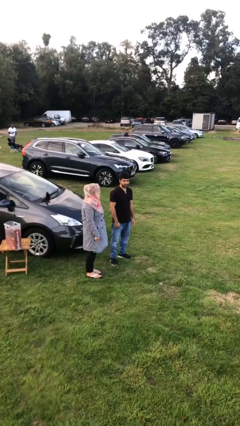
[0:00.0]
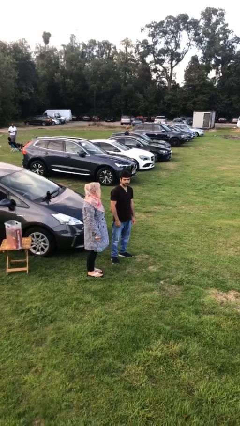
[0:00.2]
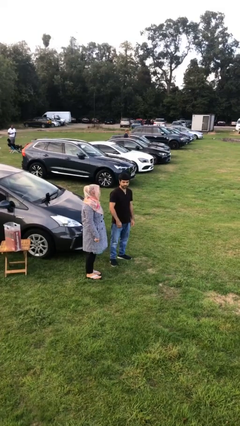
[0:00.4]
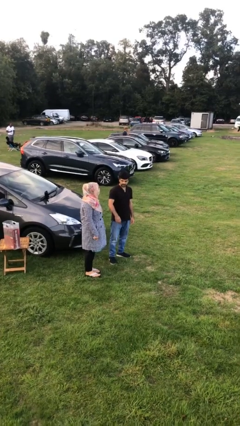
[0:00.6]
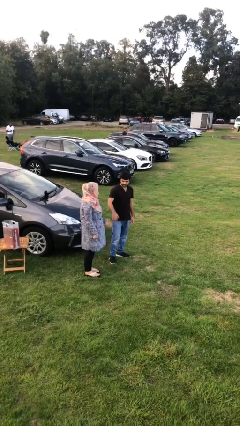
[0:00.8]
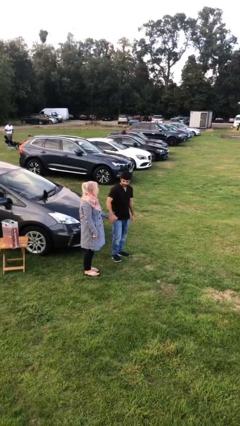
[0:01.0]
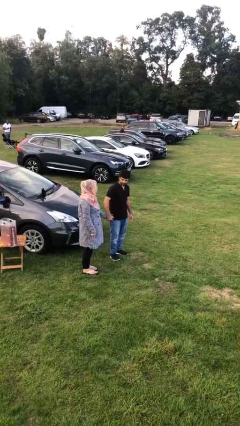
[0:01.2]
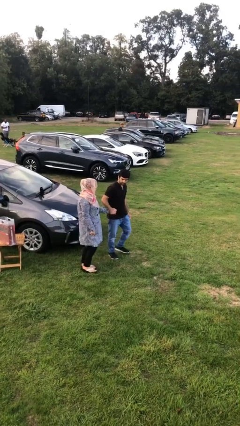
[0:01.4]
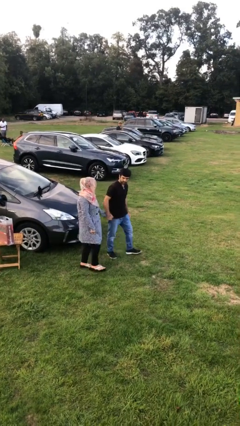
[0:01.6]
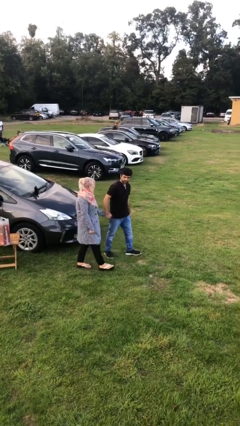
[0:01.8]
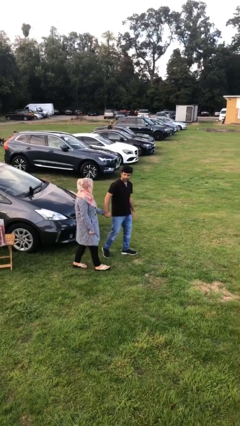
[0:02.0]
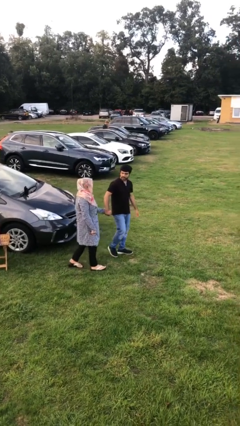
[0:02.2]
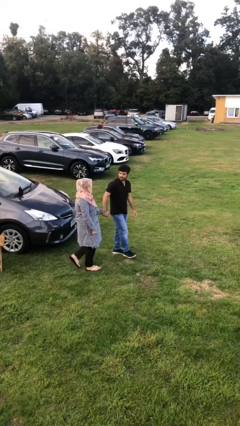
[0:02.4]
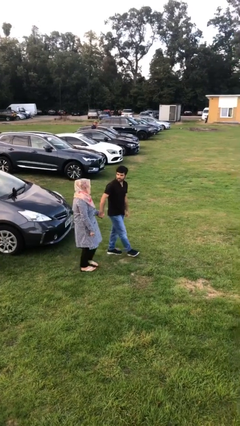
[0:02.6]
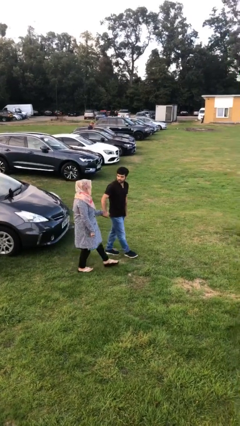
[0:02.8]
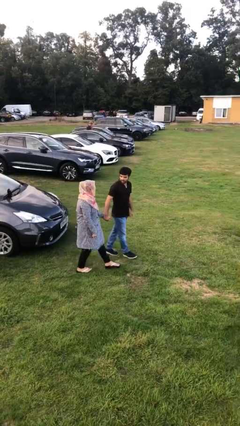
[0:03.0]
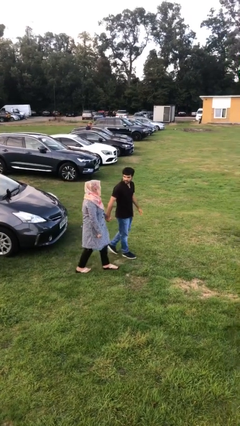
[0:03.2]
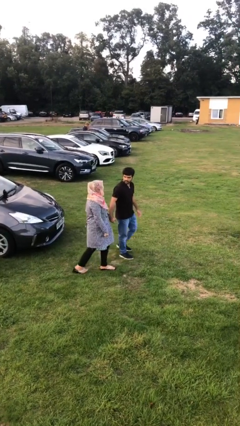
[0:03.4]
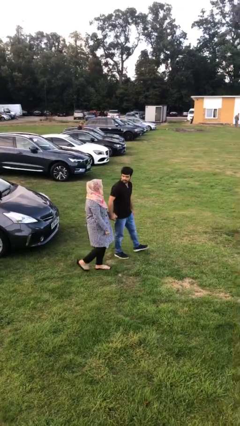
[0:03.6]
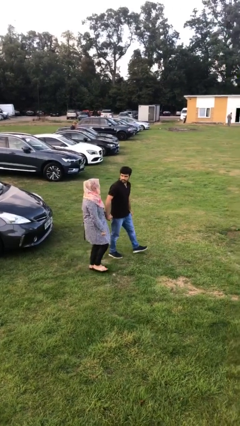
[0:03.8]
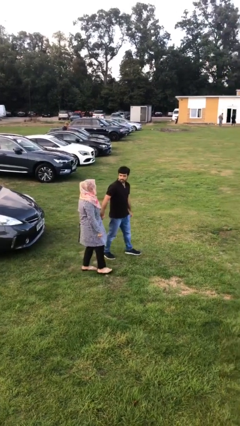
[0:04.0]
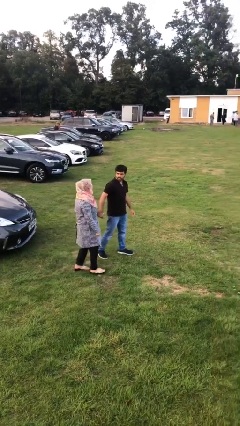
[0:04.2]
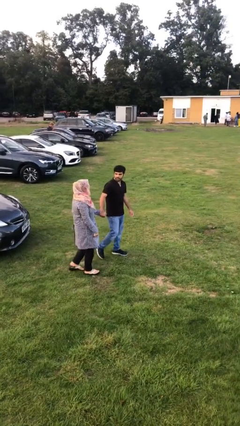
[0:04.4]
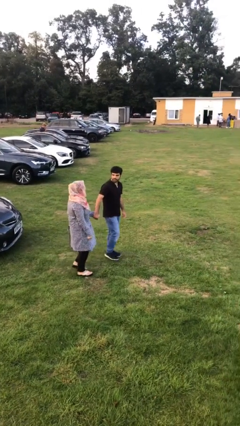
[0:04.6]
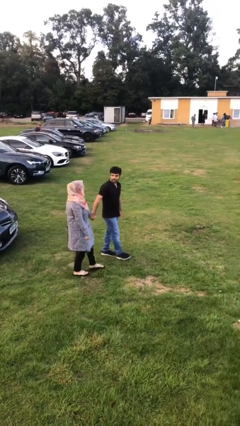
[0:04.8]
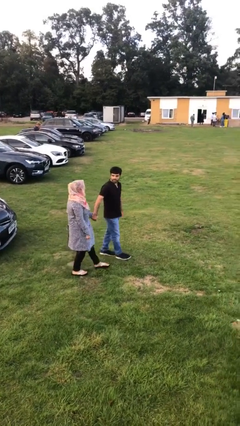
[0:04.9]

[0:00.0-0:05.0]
person holds hand

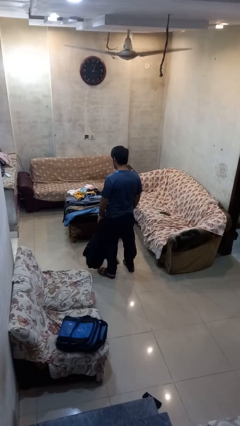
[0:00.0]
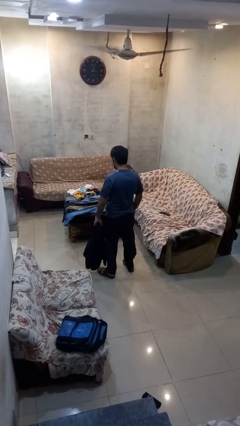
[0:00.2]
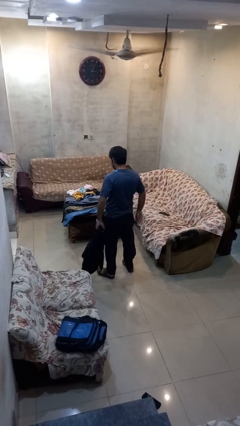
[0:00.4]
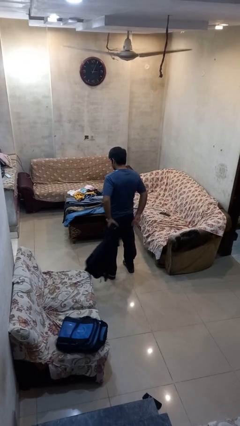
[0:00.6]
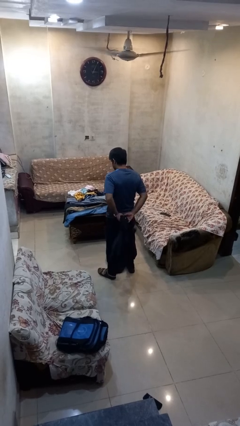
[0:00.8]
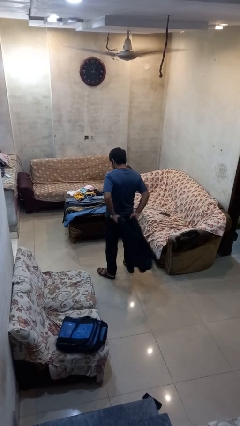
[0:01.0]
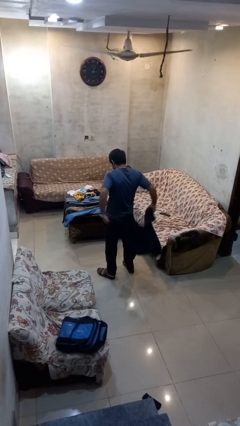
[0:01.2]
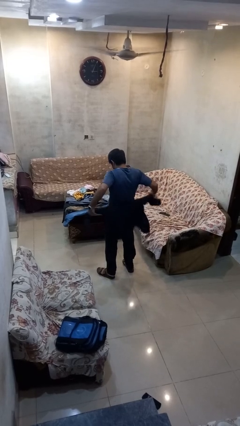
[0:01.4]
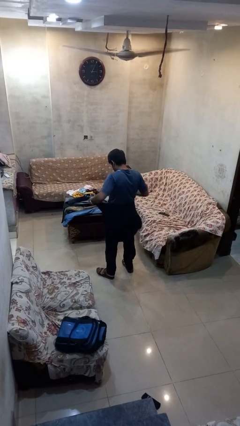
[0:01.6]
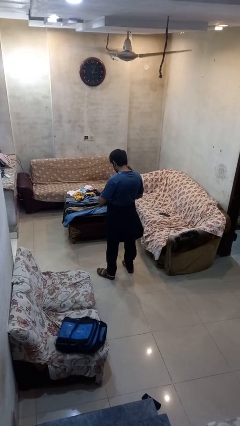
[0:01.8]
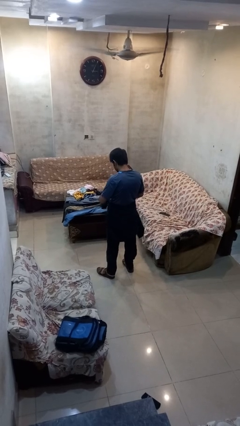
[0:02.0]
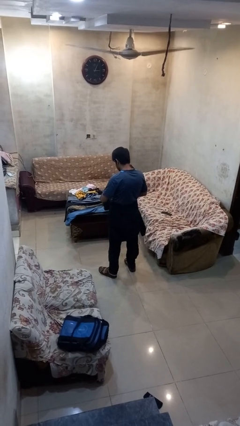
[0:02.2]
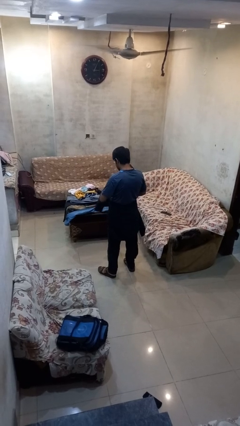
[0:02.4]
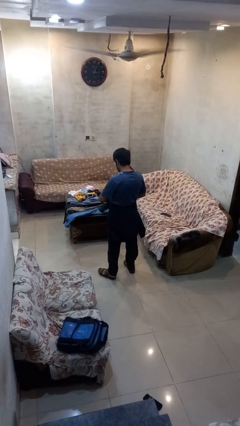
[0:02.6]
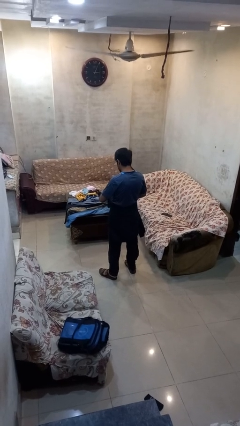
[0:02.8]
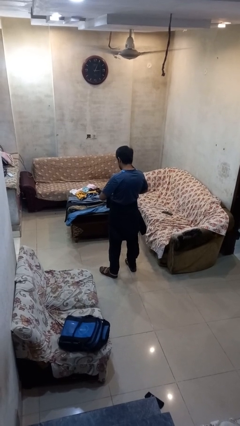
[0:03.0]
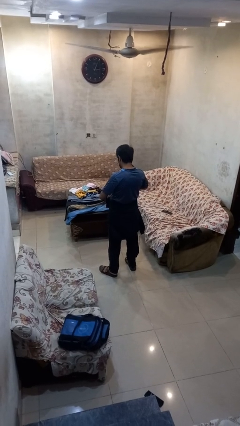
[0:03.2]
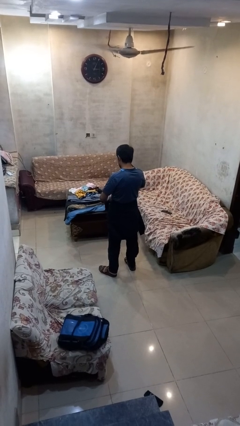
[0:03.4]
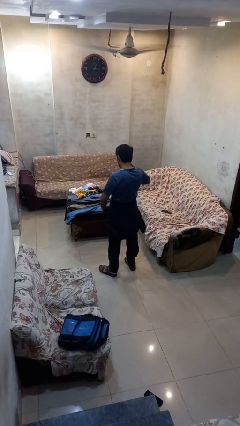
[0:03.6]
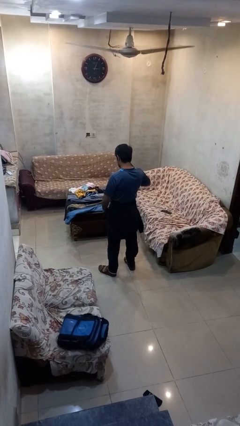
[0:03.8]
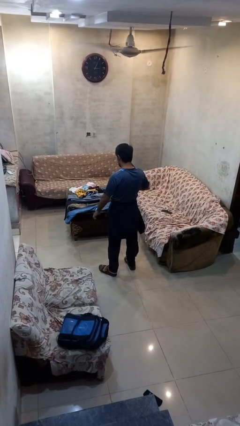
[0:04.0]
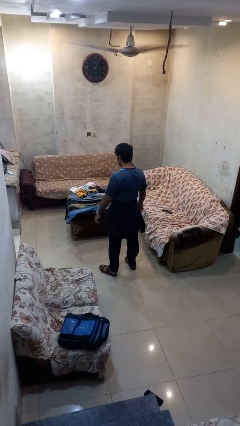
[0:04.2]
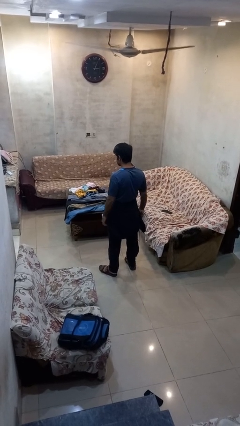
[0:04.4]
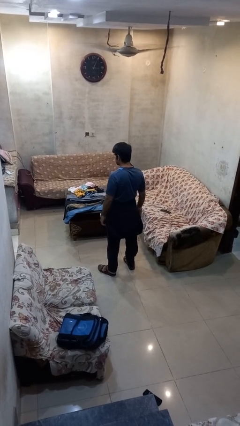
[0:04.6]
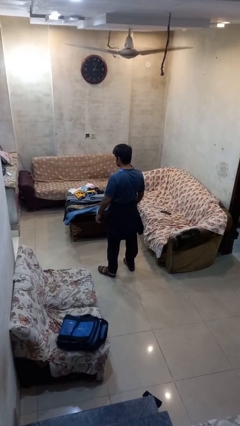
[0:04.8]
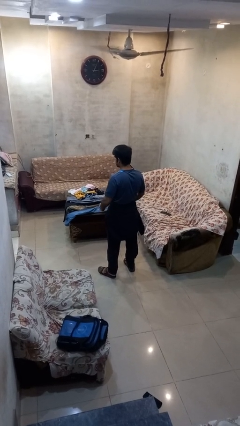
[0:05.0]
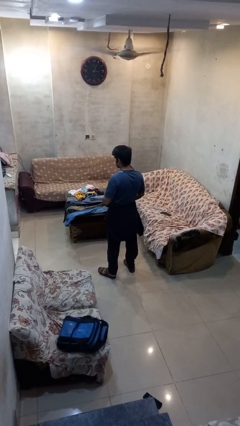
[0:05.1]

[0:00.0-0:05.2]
person ties jacket around waist

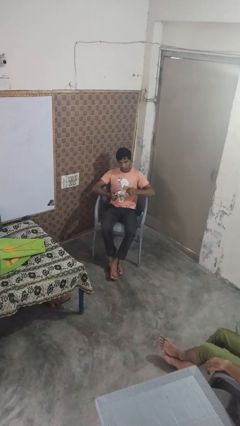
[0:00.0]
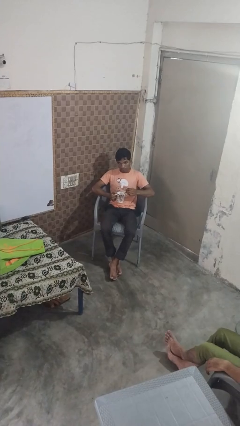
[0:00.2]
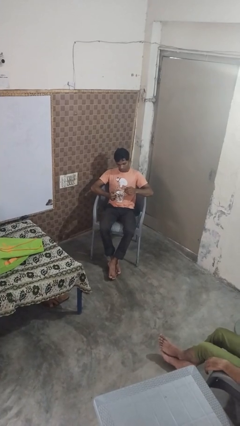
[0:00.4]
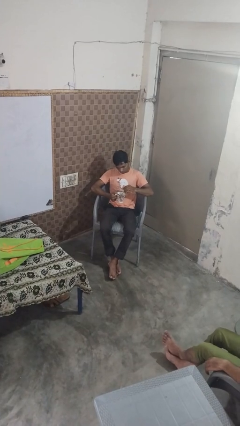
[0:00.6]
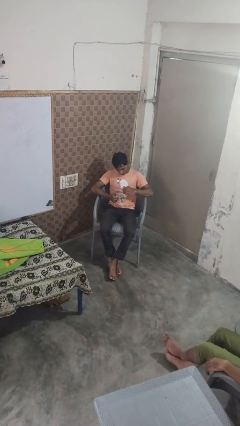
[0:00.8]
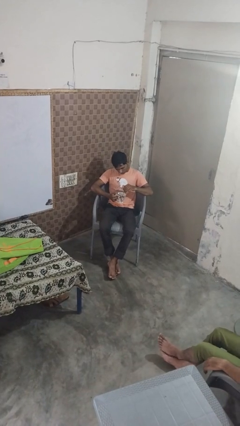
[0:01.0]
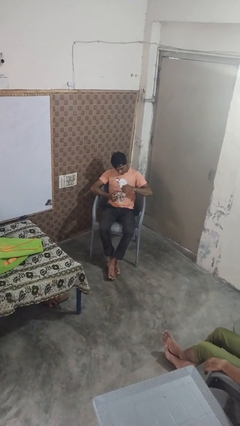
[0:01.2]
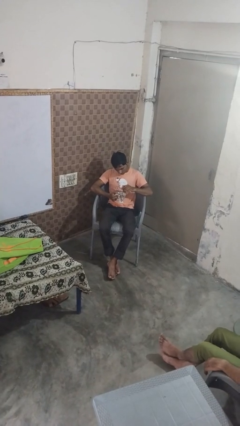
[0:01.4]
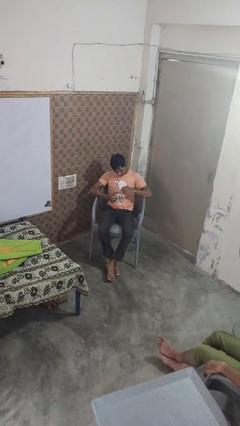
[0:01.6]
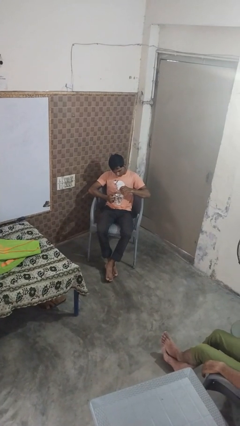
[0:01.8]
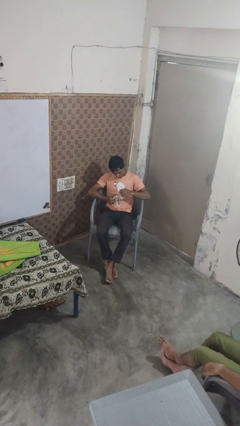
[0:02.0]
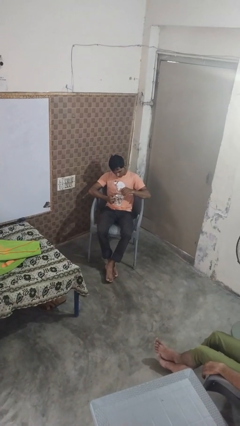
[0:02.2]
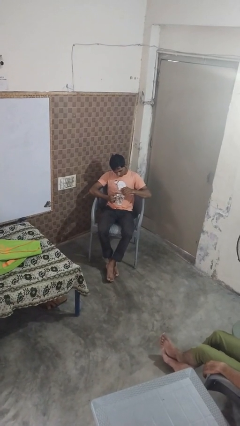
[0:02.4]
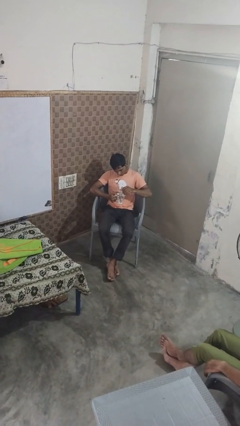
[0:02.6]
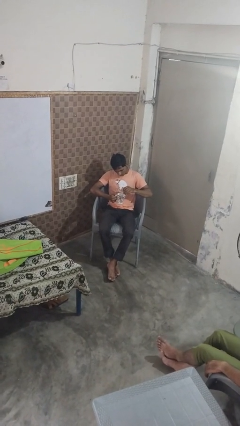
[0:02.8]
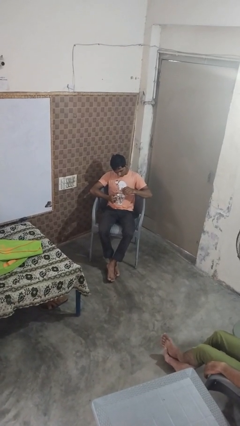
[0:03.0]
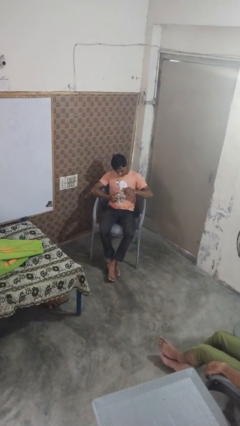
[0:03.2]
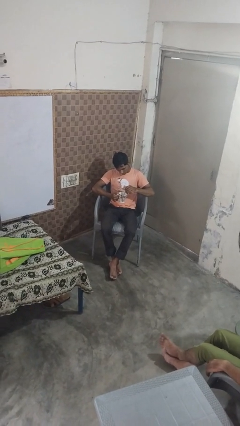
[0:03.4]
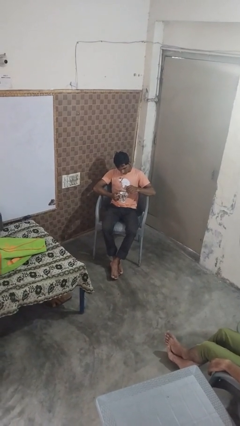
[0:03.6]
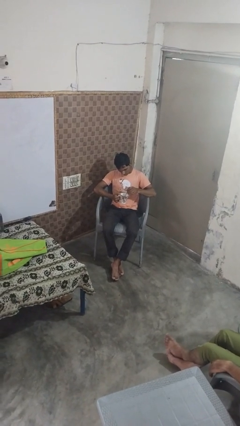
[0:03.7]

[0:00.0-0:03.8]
person stirs mug

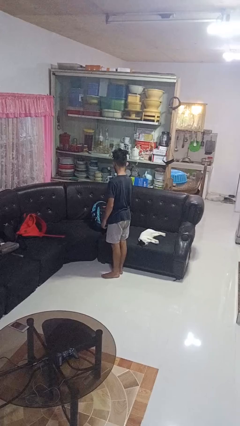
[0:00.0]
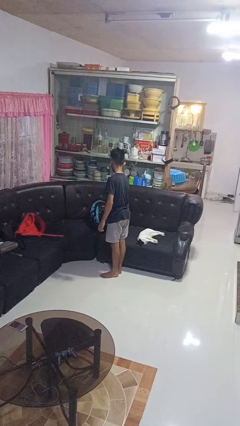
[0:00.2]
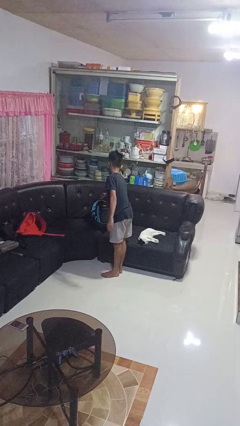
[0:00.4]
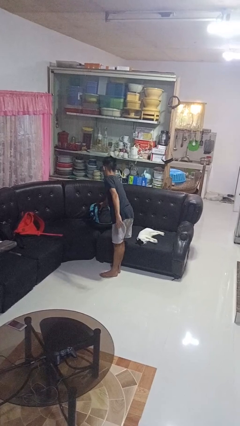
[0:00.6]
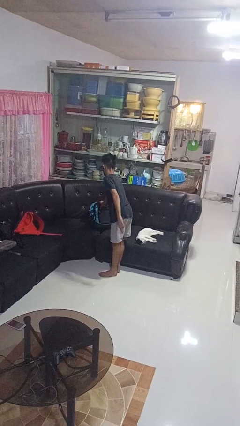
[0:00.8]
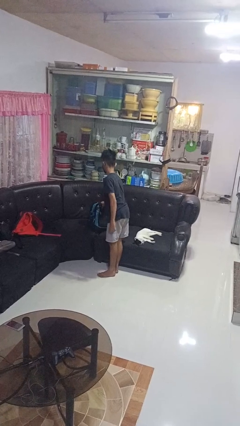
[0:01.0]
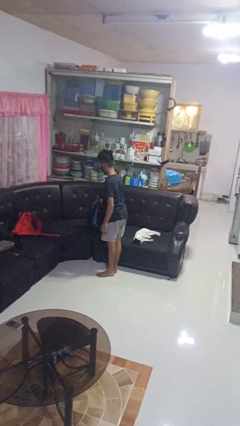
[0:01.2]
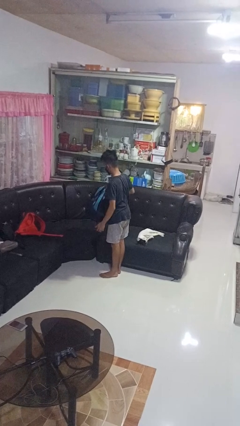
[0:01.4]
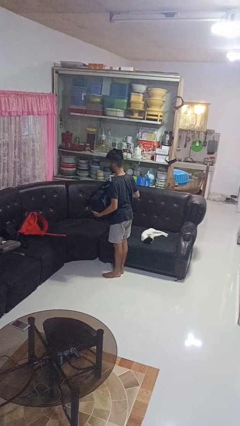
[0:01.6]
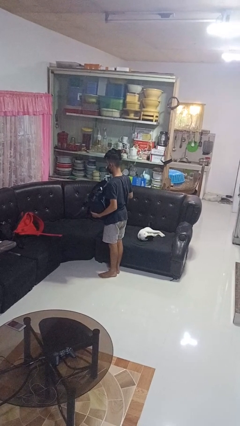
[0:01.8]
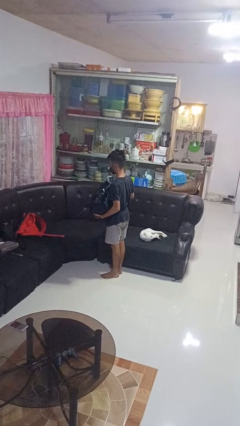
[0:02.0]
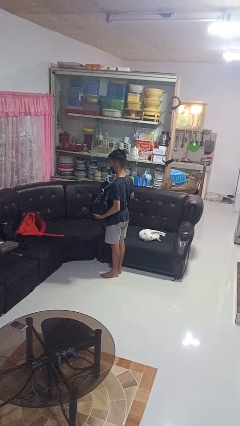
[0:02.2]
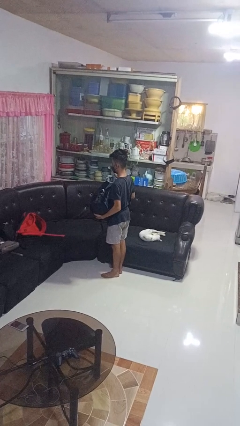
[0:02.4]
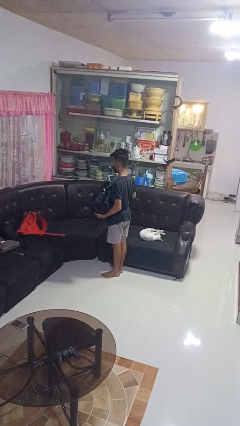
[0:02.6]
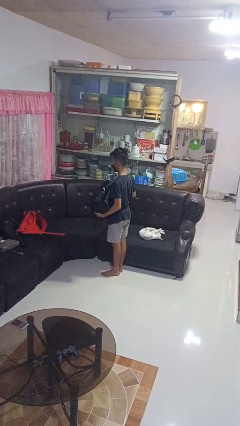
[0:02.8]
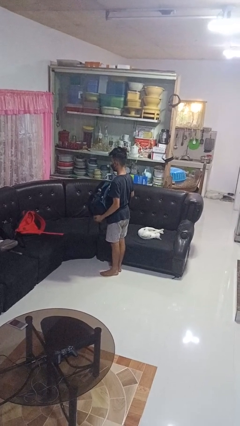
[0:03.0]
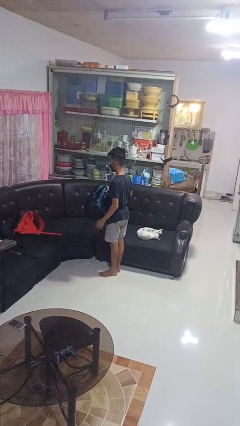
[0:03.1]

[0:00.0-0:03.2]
person picks up object from couch

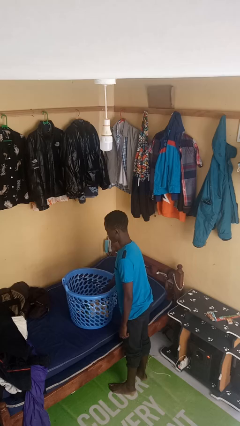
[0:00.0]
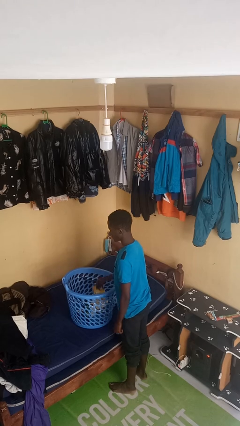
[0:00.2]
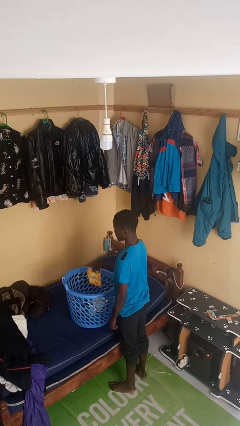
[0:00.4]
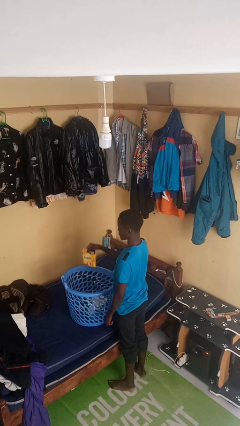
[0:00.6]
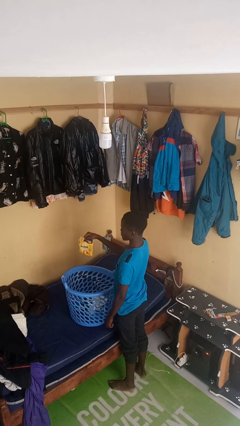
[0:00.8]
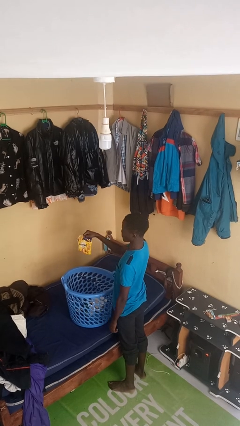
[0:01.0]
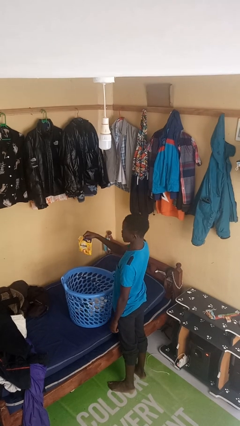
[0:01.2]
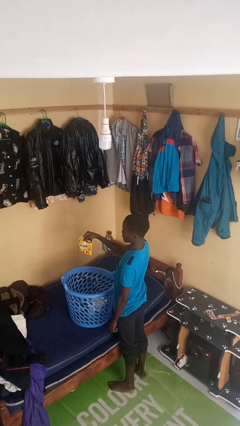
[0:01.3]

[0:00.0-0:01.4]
person takes object from basket
